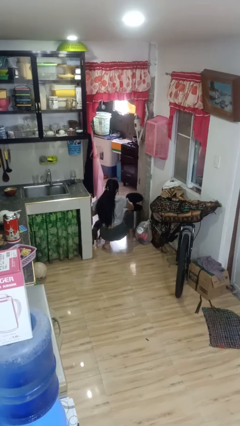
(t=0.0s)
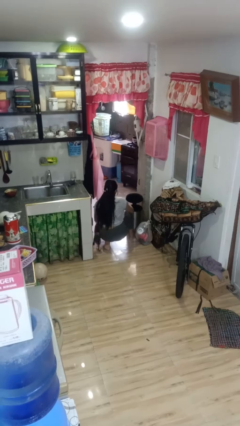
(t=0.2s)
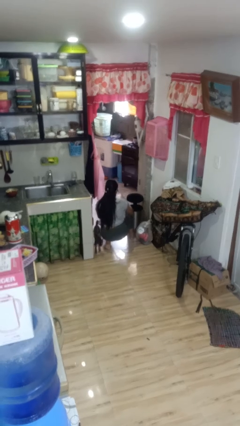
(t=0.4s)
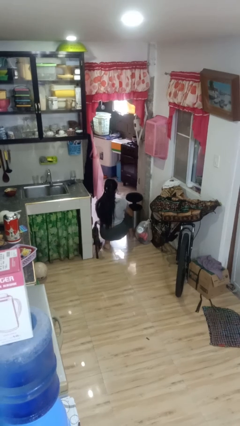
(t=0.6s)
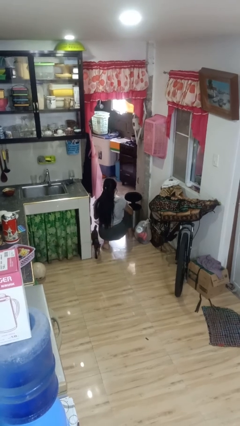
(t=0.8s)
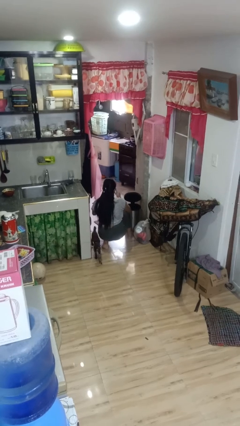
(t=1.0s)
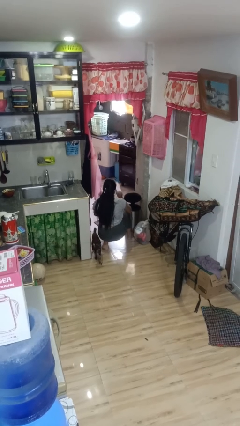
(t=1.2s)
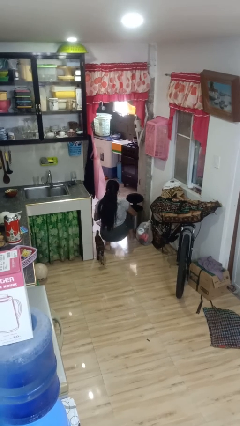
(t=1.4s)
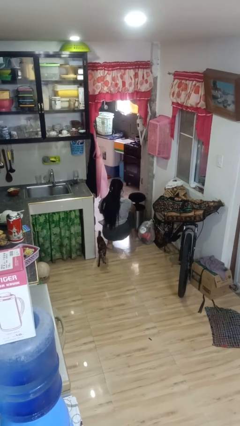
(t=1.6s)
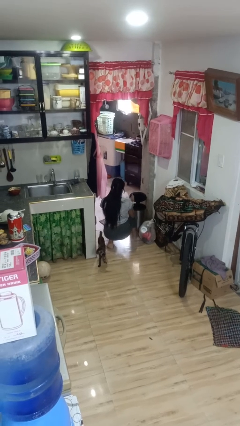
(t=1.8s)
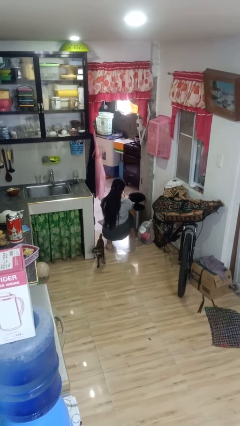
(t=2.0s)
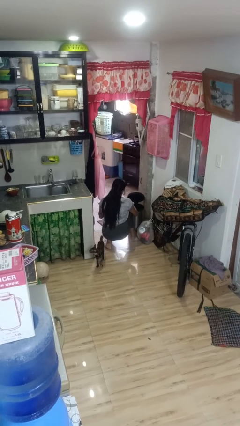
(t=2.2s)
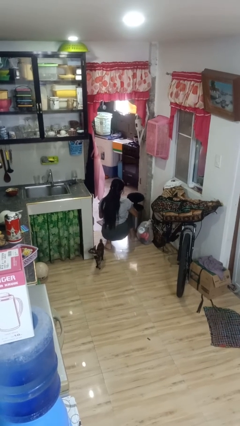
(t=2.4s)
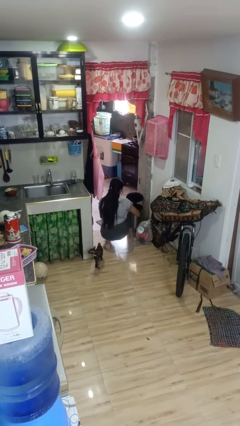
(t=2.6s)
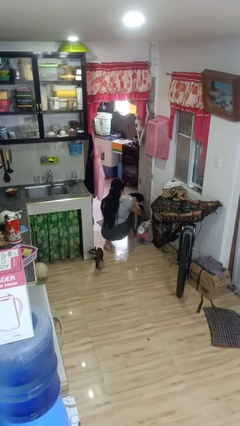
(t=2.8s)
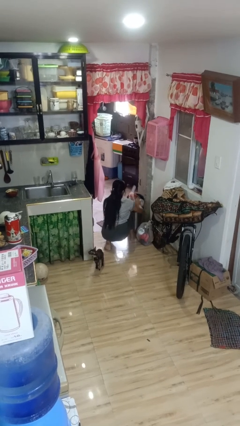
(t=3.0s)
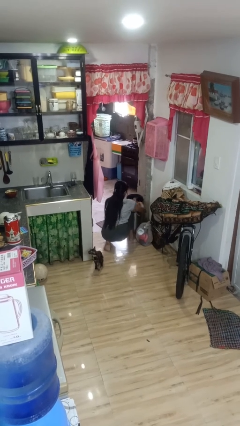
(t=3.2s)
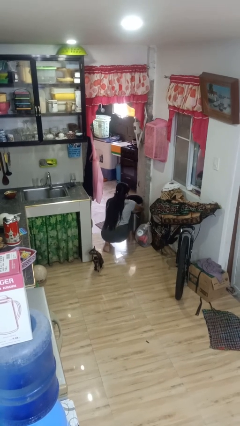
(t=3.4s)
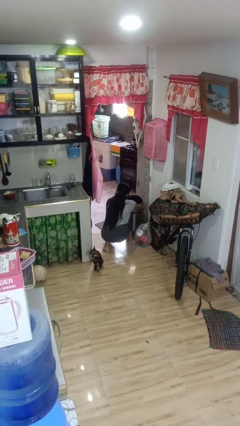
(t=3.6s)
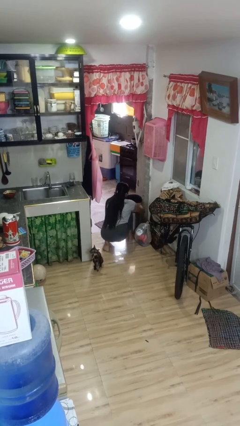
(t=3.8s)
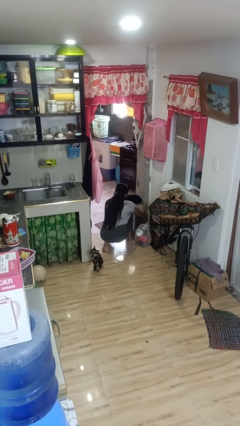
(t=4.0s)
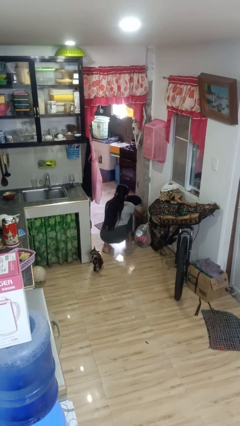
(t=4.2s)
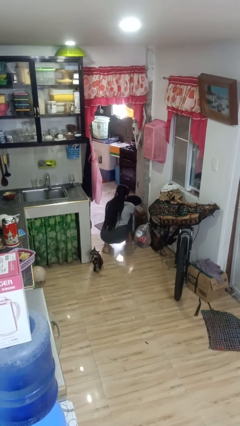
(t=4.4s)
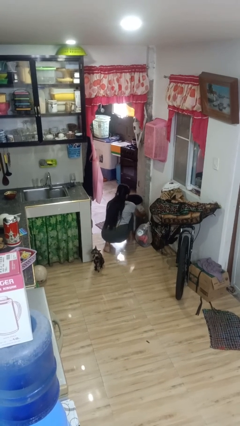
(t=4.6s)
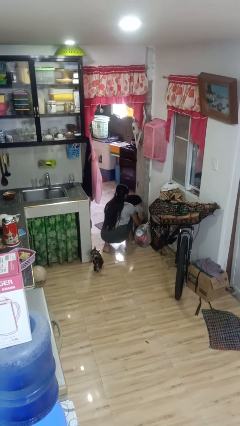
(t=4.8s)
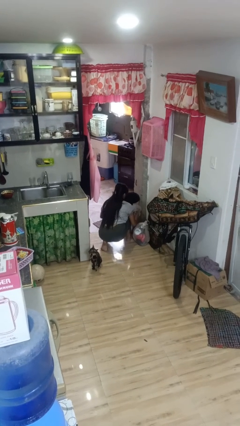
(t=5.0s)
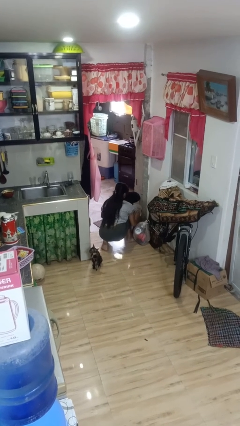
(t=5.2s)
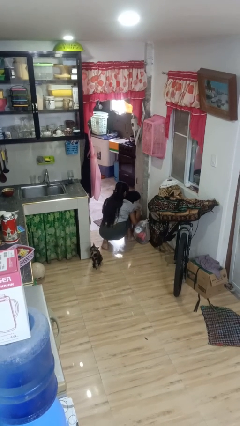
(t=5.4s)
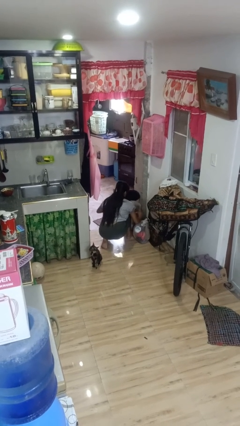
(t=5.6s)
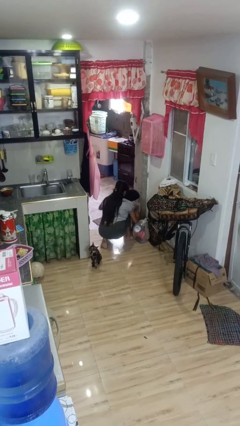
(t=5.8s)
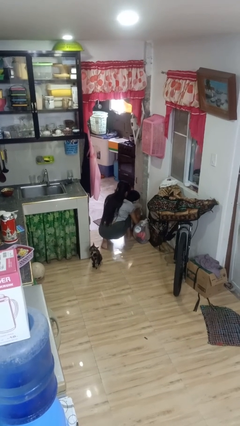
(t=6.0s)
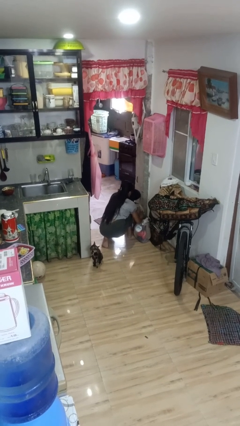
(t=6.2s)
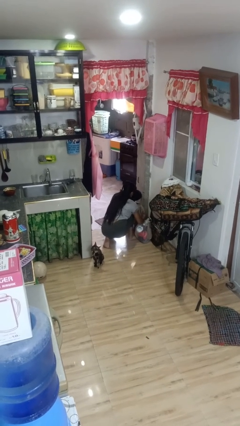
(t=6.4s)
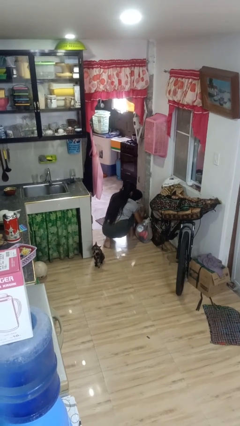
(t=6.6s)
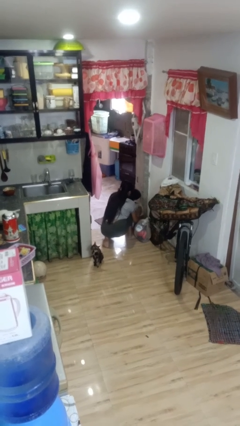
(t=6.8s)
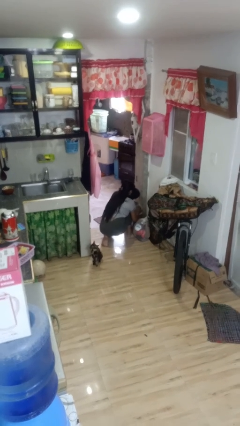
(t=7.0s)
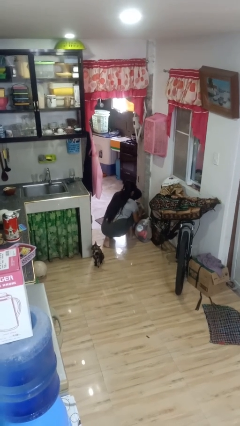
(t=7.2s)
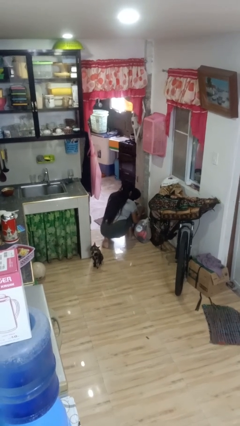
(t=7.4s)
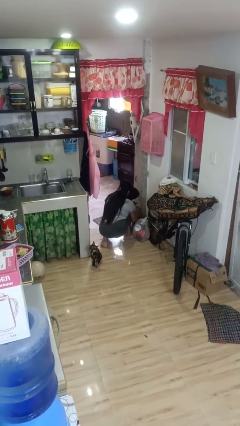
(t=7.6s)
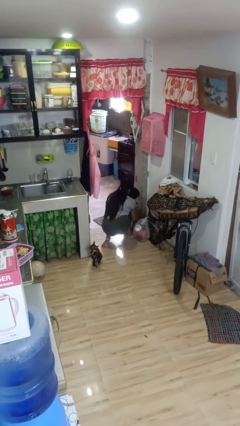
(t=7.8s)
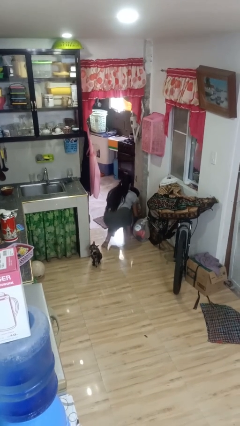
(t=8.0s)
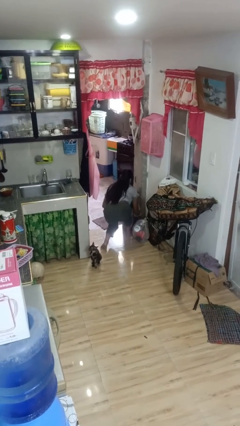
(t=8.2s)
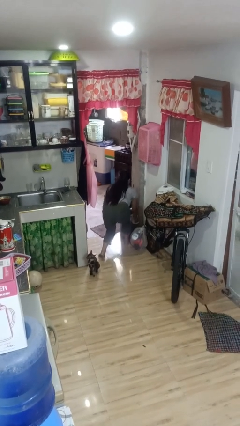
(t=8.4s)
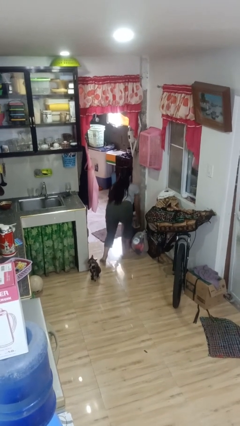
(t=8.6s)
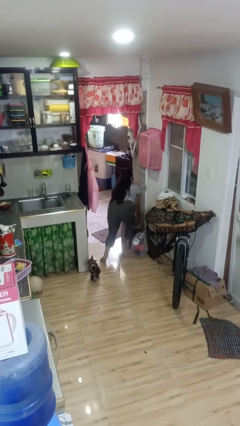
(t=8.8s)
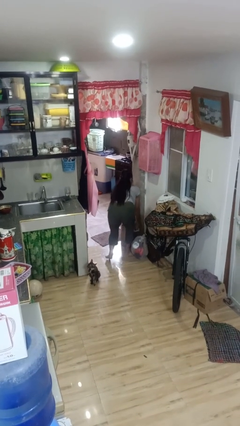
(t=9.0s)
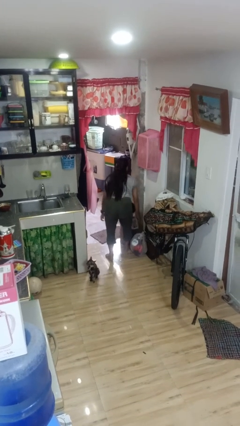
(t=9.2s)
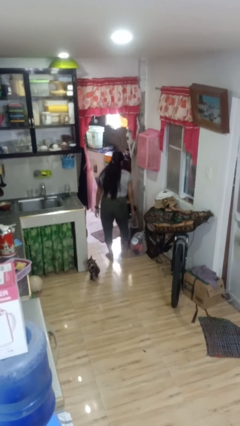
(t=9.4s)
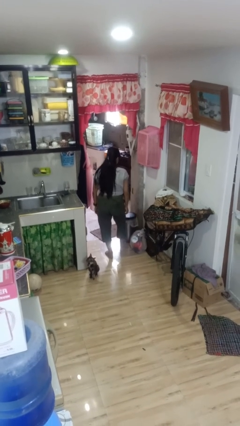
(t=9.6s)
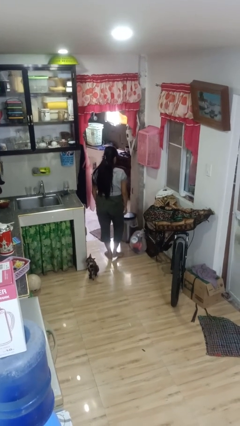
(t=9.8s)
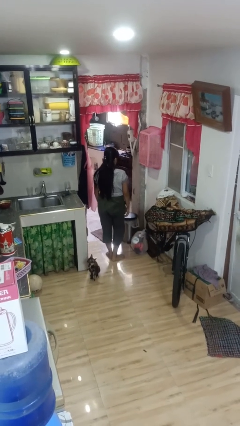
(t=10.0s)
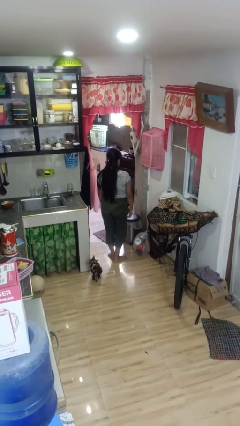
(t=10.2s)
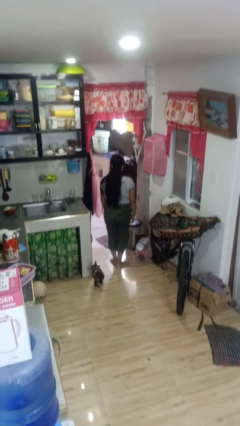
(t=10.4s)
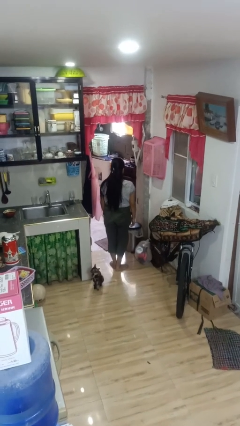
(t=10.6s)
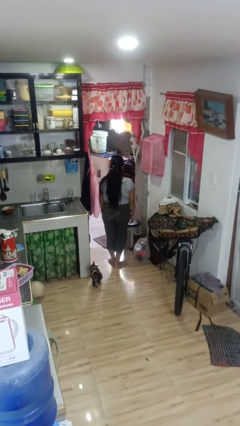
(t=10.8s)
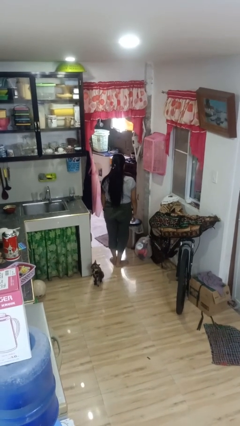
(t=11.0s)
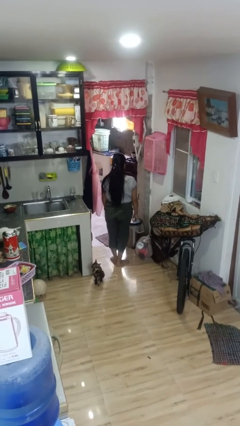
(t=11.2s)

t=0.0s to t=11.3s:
person inserts trashbag into trashcan

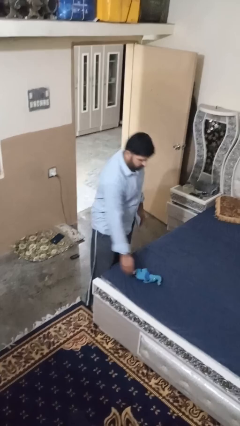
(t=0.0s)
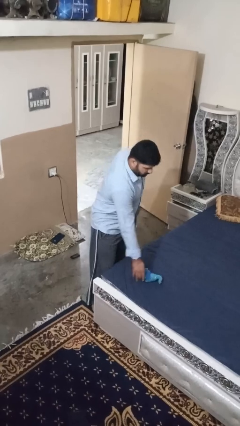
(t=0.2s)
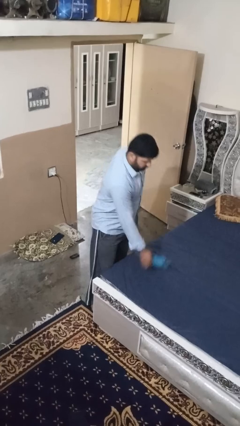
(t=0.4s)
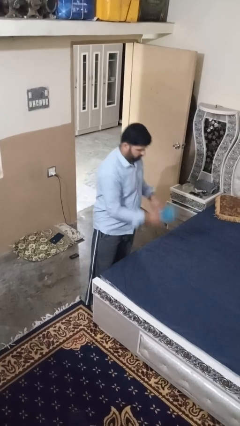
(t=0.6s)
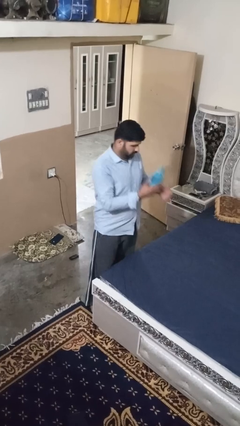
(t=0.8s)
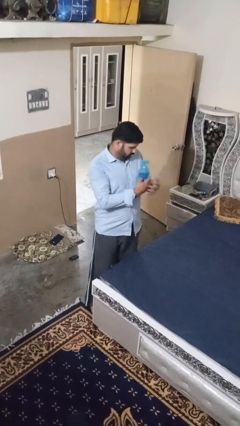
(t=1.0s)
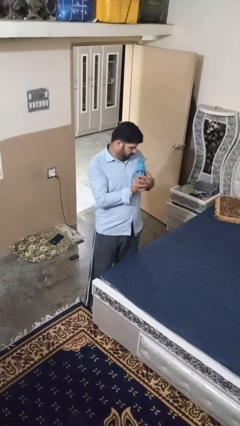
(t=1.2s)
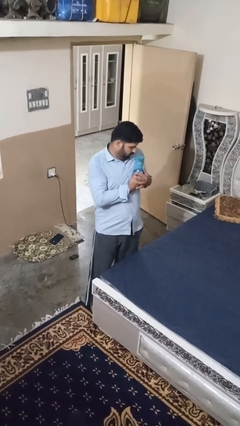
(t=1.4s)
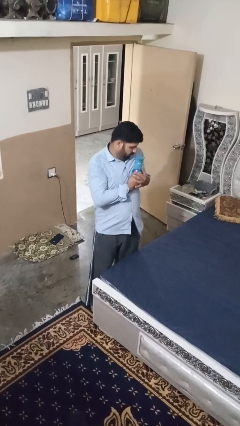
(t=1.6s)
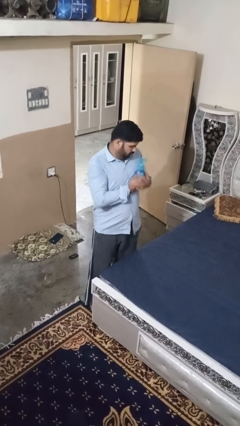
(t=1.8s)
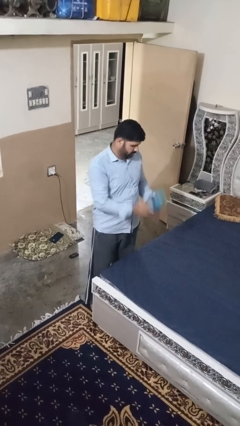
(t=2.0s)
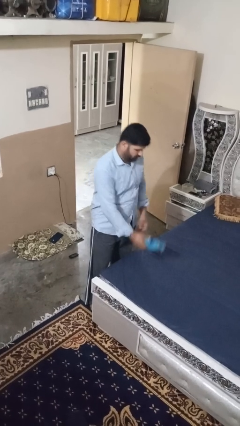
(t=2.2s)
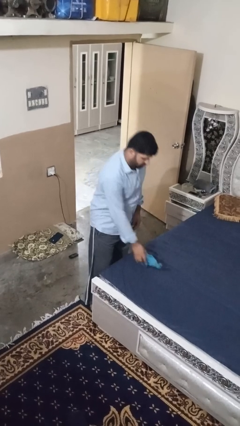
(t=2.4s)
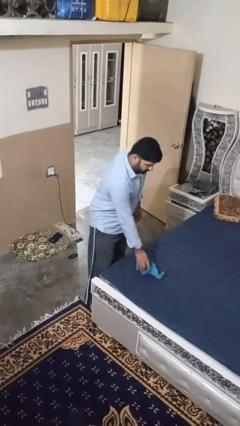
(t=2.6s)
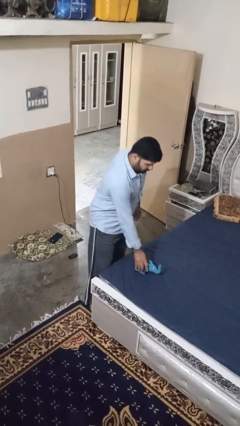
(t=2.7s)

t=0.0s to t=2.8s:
person hugs stuffed animal

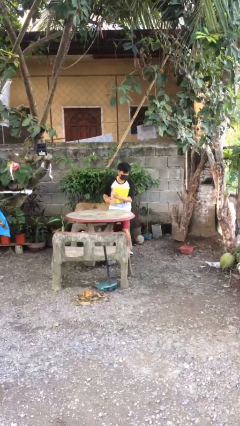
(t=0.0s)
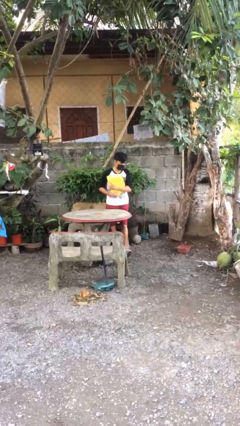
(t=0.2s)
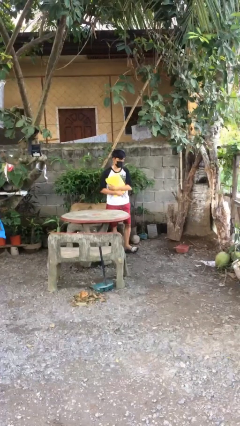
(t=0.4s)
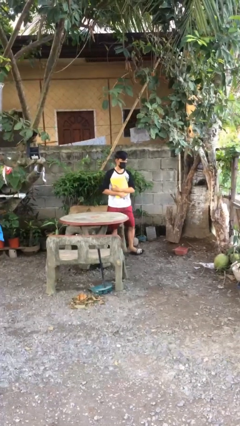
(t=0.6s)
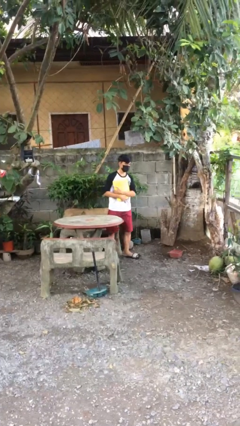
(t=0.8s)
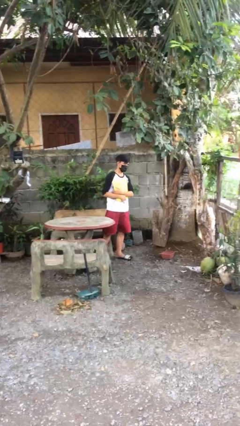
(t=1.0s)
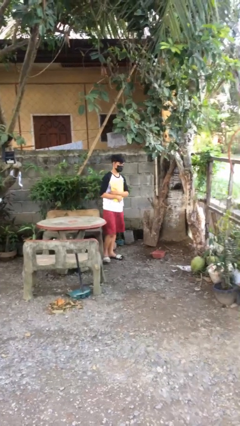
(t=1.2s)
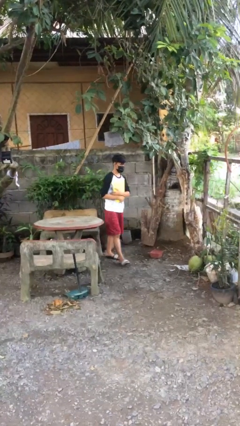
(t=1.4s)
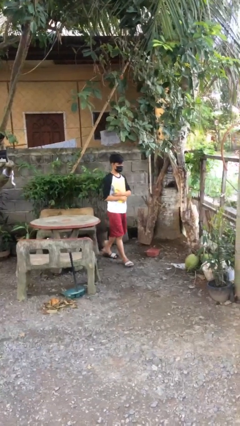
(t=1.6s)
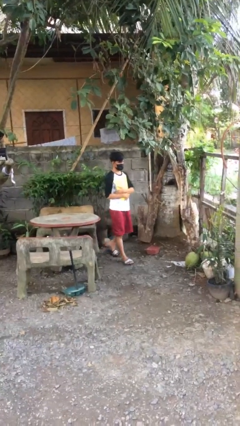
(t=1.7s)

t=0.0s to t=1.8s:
person stands up

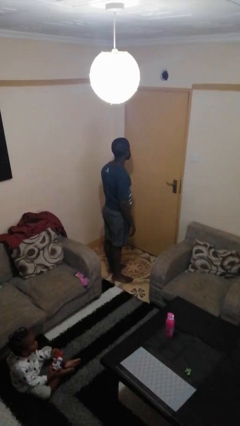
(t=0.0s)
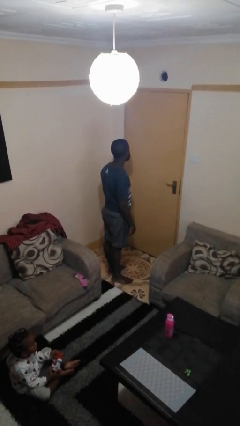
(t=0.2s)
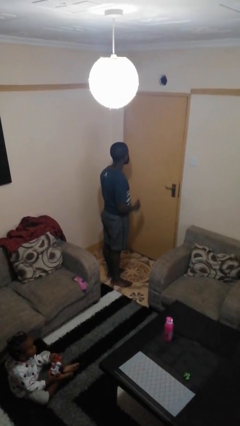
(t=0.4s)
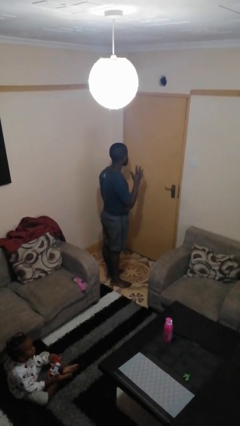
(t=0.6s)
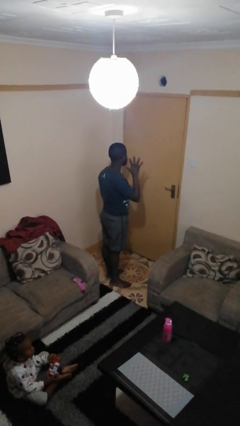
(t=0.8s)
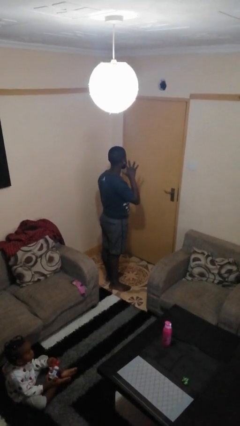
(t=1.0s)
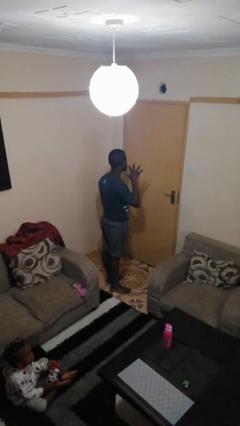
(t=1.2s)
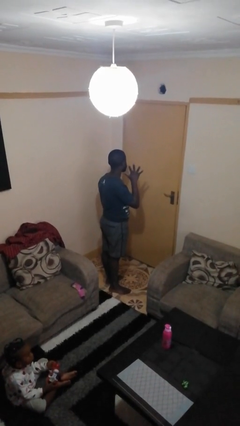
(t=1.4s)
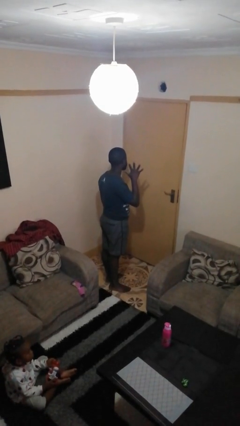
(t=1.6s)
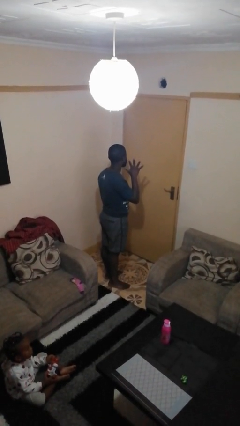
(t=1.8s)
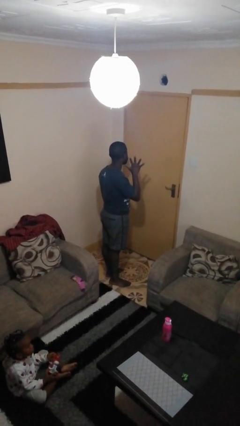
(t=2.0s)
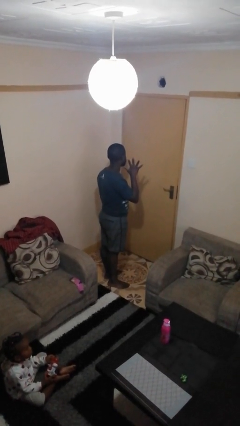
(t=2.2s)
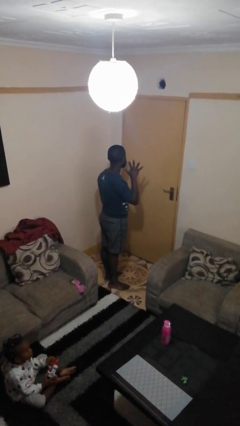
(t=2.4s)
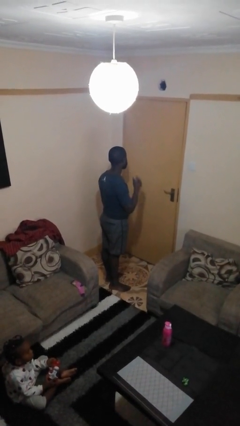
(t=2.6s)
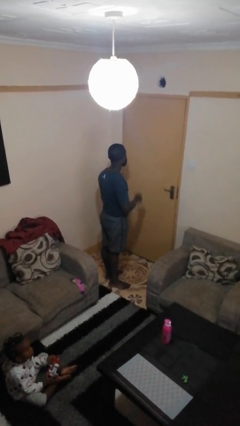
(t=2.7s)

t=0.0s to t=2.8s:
person gestures number five
